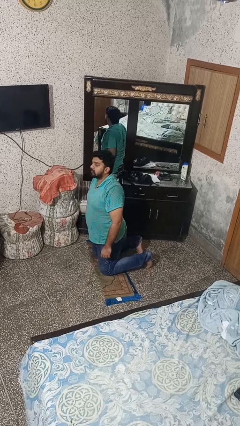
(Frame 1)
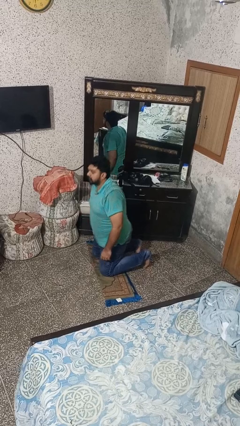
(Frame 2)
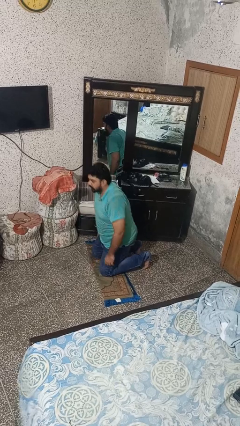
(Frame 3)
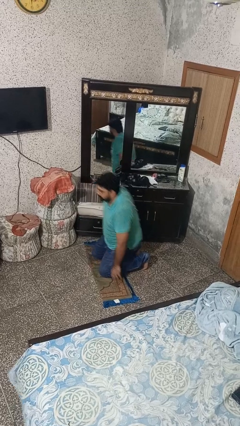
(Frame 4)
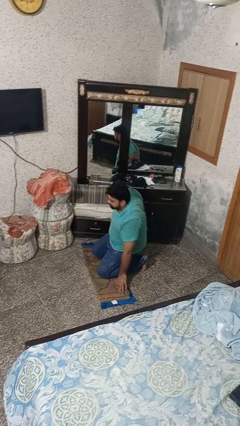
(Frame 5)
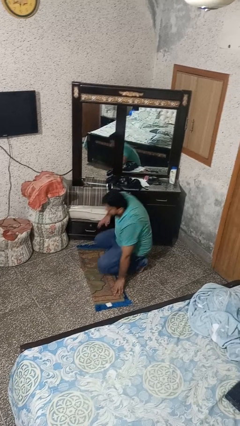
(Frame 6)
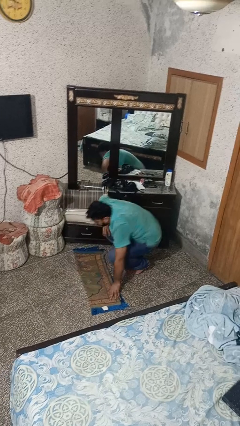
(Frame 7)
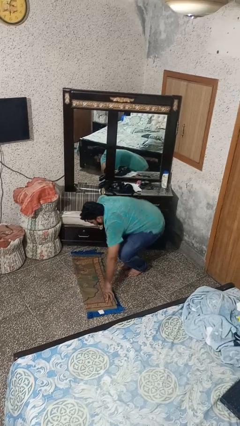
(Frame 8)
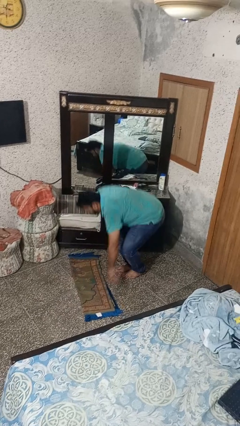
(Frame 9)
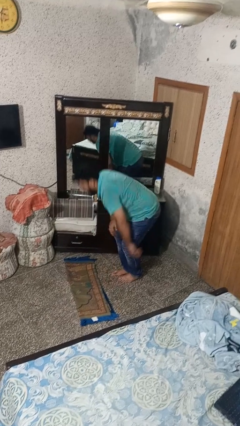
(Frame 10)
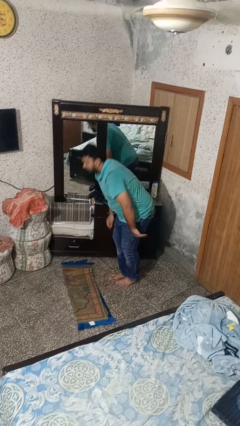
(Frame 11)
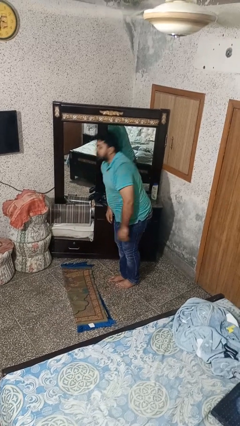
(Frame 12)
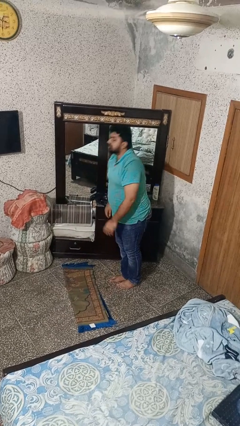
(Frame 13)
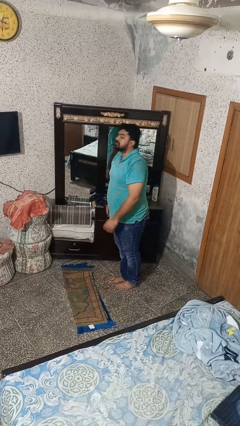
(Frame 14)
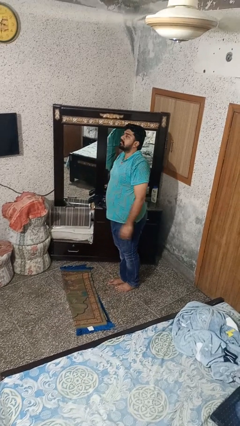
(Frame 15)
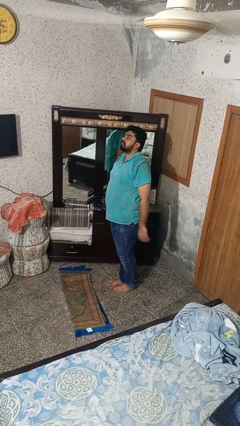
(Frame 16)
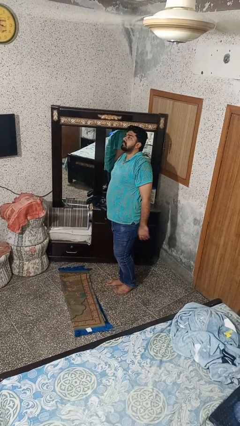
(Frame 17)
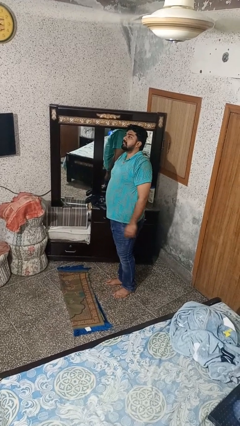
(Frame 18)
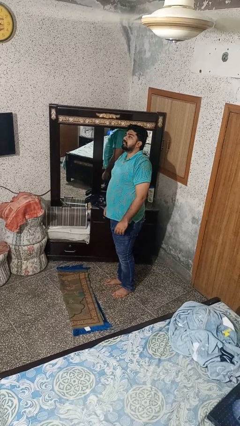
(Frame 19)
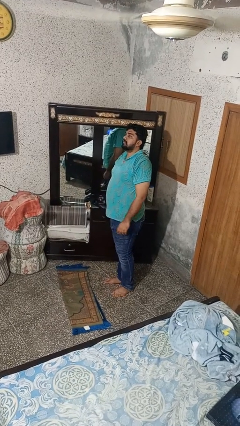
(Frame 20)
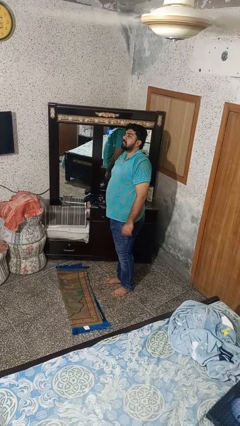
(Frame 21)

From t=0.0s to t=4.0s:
person stands up from floor

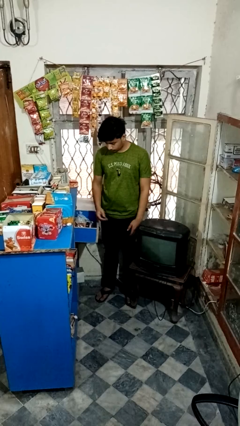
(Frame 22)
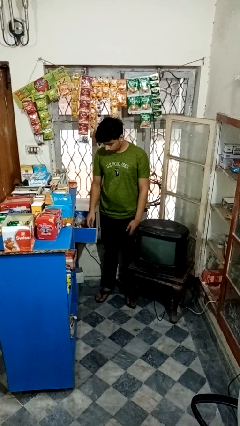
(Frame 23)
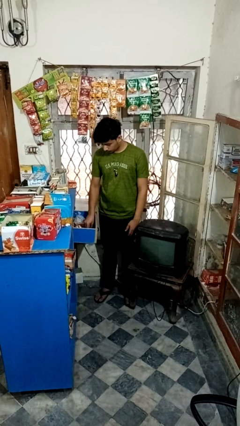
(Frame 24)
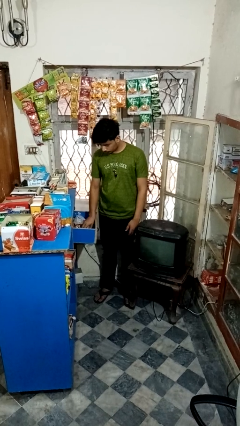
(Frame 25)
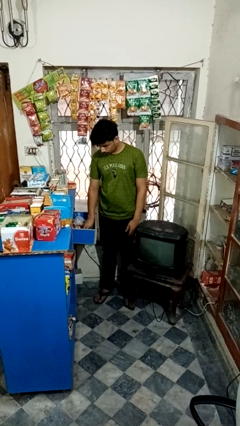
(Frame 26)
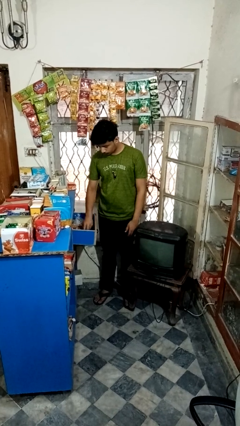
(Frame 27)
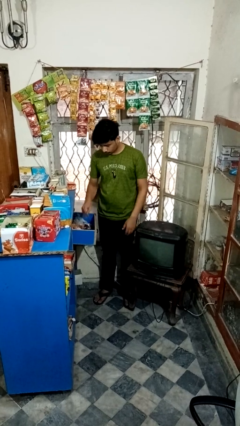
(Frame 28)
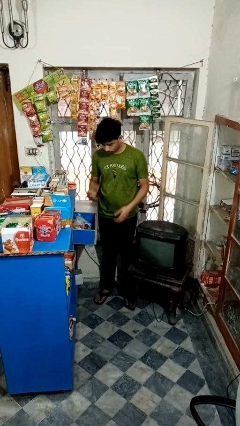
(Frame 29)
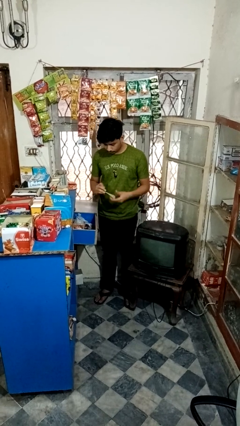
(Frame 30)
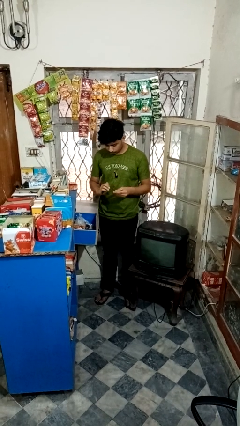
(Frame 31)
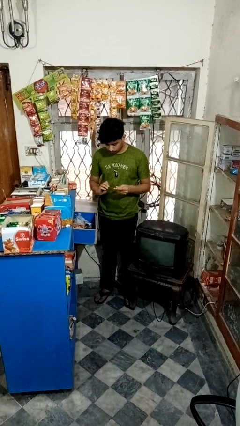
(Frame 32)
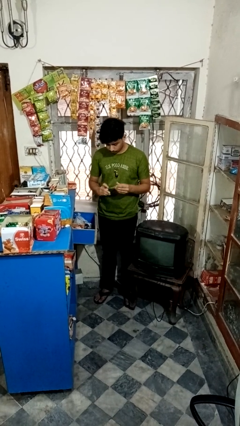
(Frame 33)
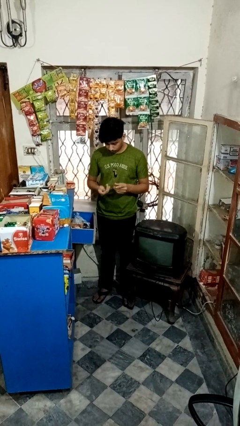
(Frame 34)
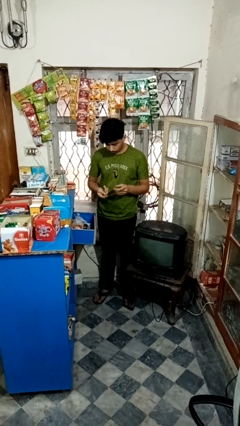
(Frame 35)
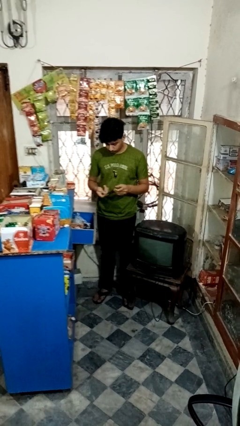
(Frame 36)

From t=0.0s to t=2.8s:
person takes object from kitchen drawer

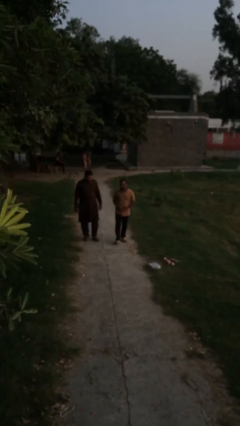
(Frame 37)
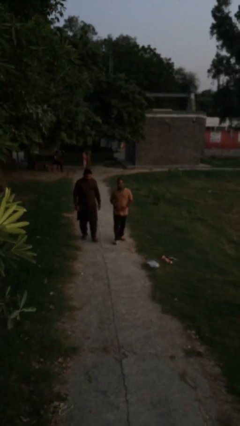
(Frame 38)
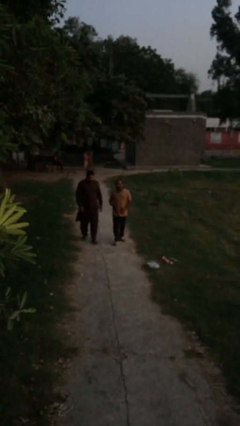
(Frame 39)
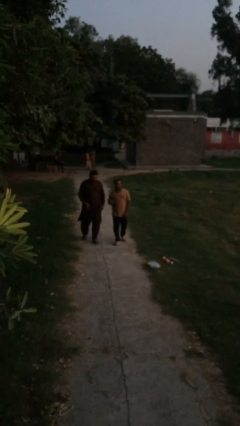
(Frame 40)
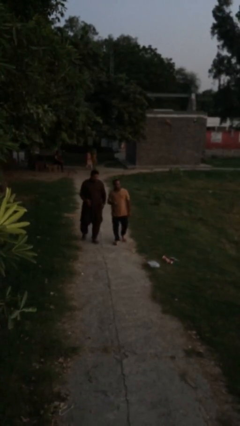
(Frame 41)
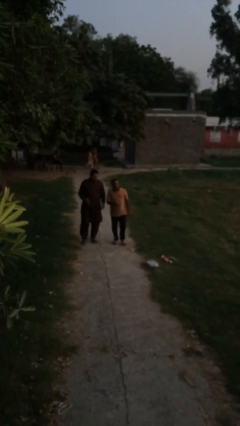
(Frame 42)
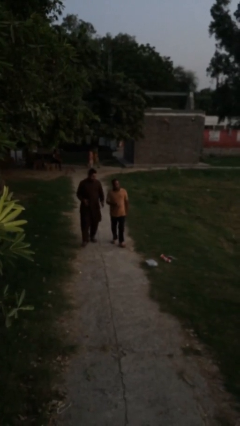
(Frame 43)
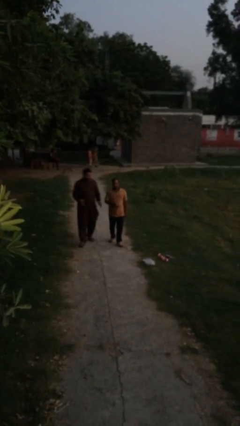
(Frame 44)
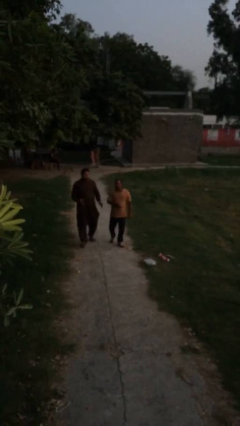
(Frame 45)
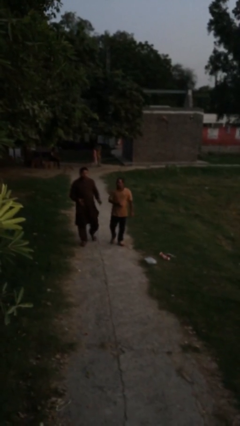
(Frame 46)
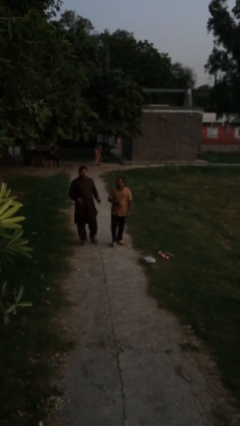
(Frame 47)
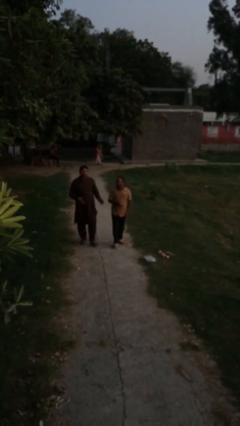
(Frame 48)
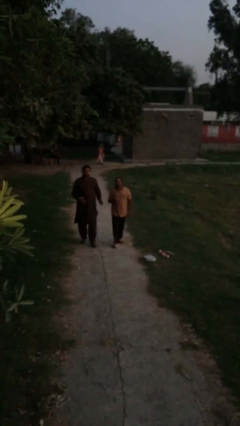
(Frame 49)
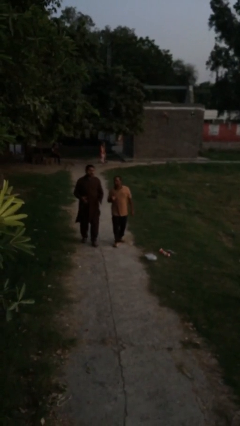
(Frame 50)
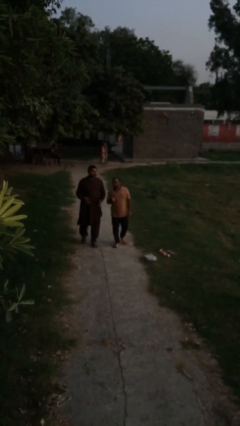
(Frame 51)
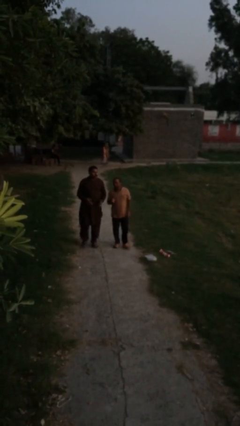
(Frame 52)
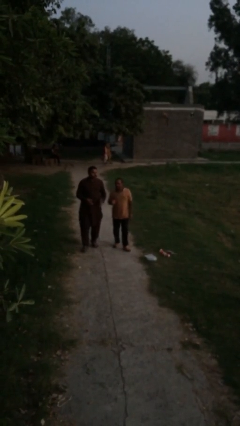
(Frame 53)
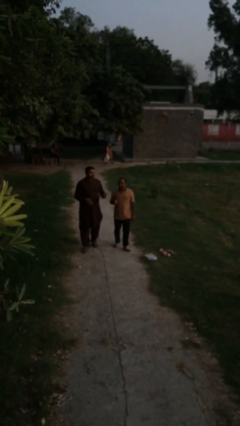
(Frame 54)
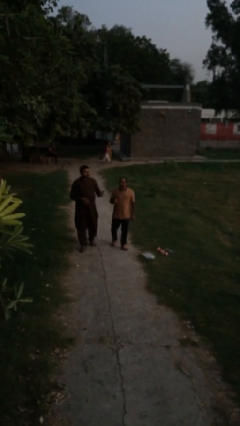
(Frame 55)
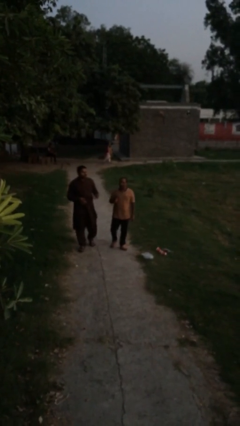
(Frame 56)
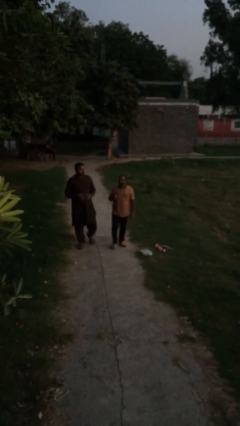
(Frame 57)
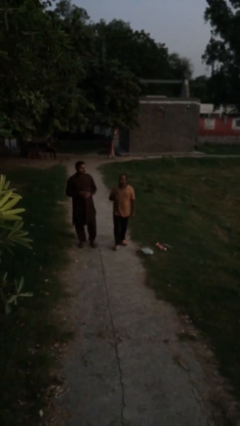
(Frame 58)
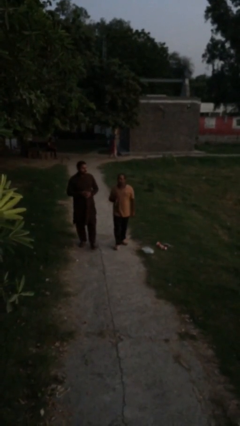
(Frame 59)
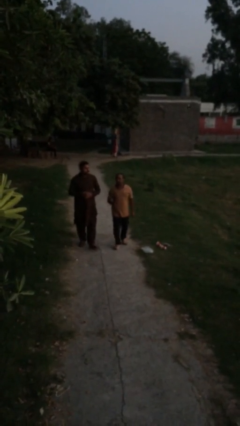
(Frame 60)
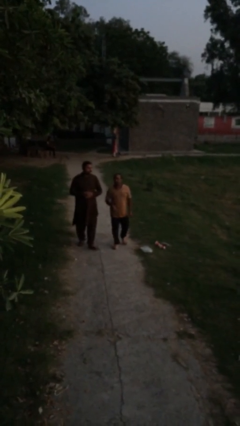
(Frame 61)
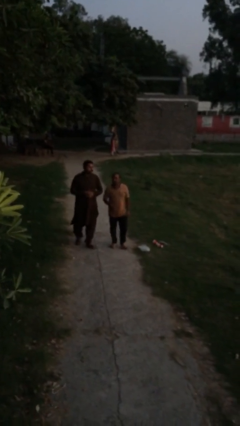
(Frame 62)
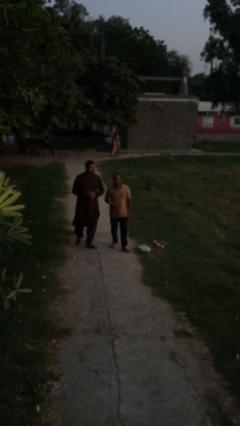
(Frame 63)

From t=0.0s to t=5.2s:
person talks to person

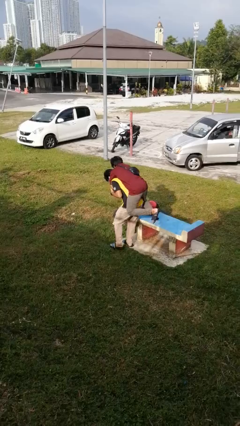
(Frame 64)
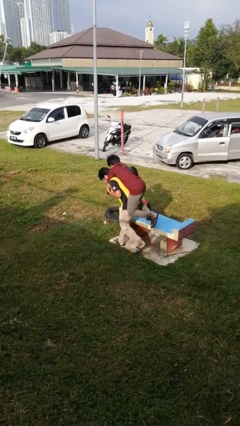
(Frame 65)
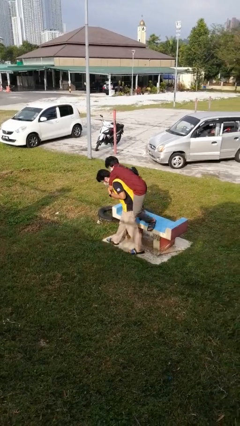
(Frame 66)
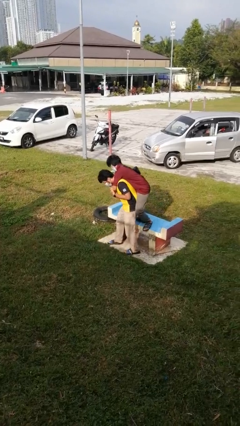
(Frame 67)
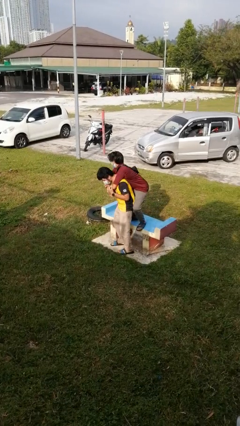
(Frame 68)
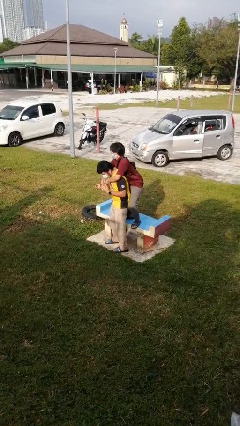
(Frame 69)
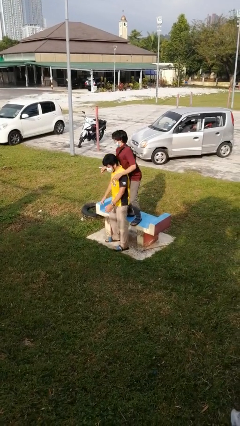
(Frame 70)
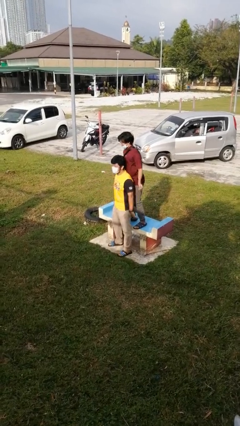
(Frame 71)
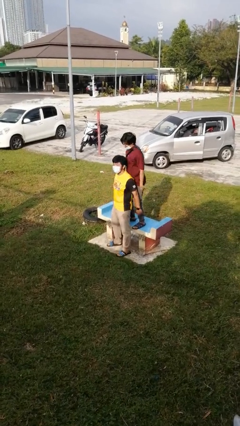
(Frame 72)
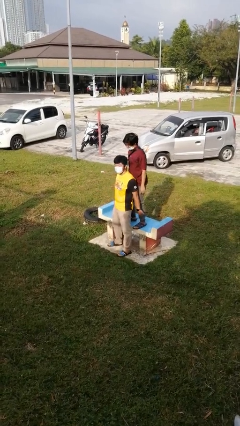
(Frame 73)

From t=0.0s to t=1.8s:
person puts down person

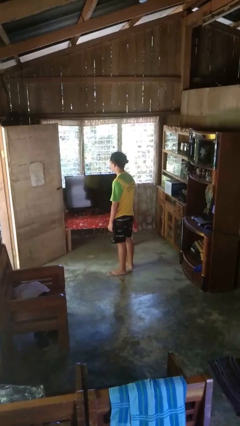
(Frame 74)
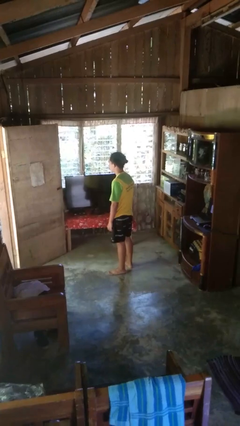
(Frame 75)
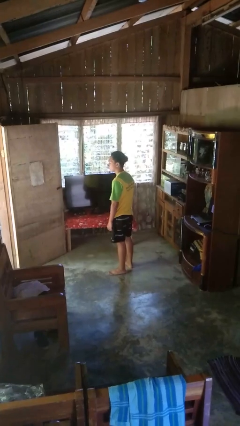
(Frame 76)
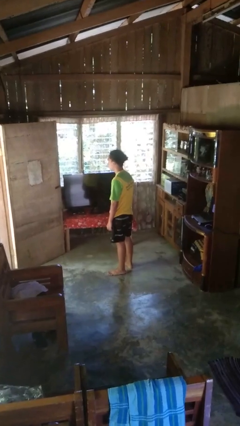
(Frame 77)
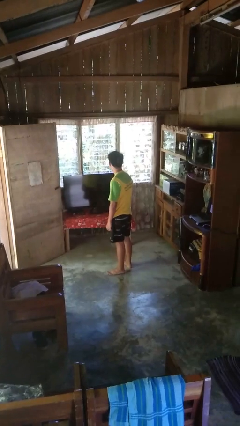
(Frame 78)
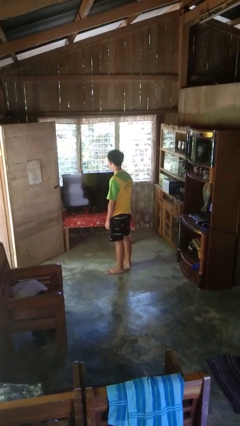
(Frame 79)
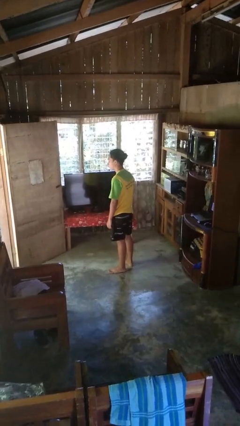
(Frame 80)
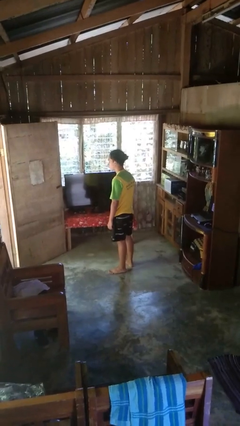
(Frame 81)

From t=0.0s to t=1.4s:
person shakes head

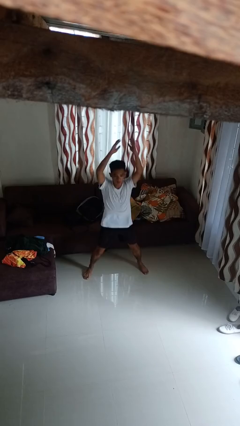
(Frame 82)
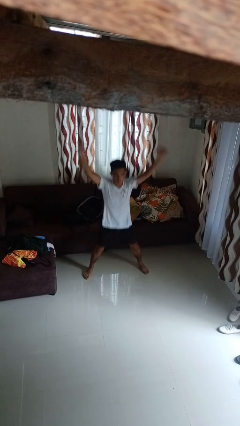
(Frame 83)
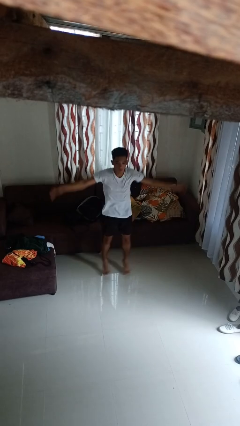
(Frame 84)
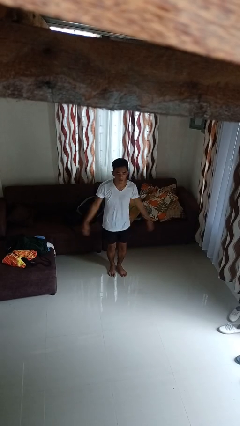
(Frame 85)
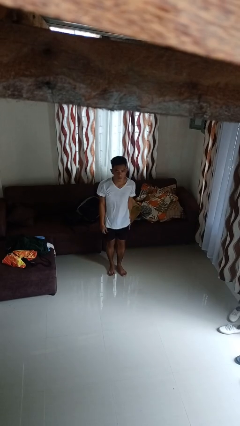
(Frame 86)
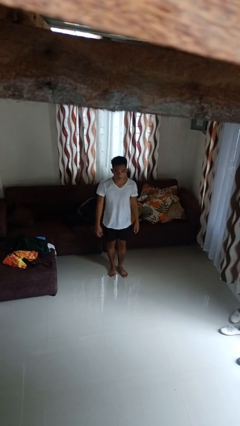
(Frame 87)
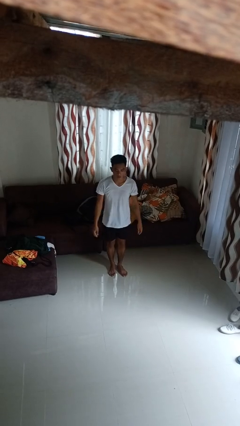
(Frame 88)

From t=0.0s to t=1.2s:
person exercises with jumping jacks

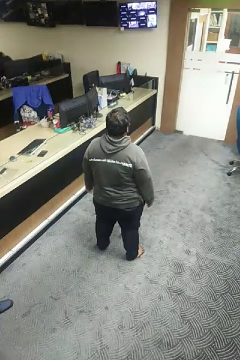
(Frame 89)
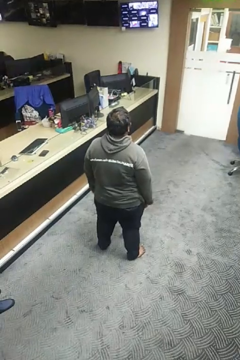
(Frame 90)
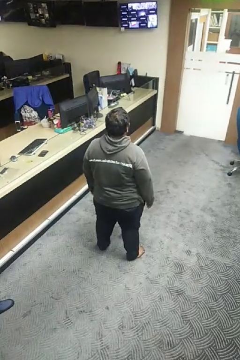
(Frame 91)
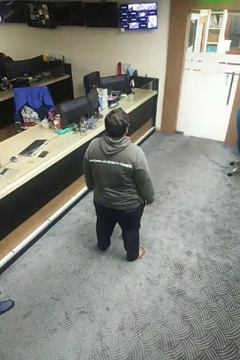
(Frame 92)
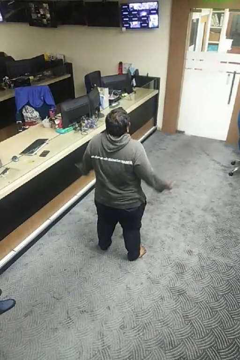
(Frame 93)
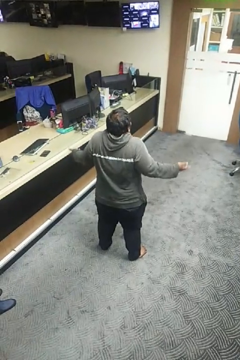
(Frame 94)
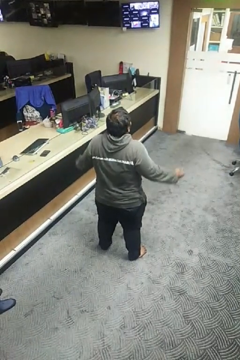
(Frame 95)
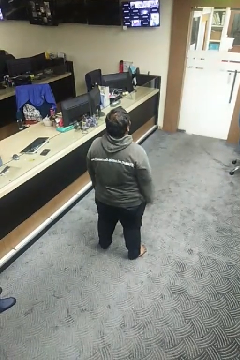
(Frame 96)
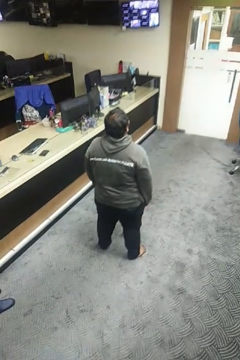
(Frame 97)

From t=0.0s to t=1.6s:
person shrugs
